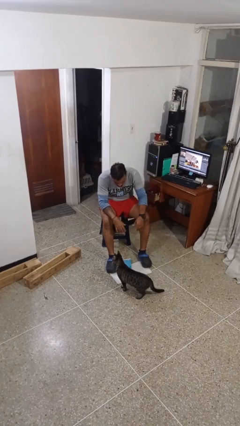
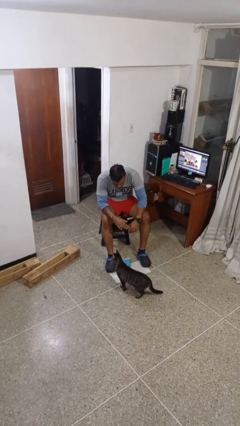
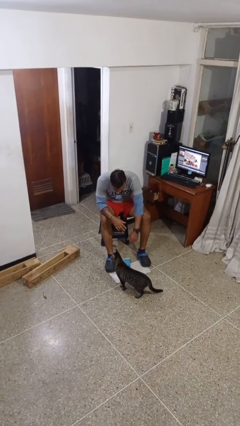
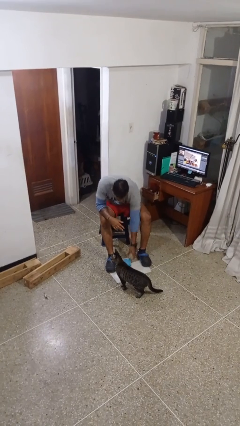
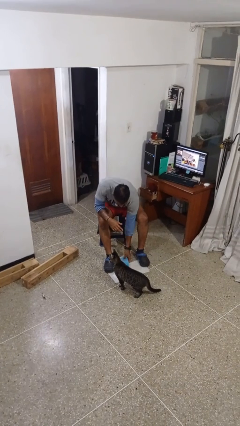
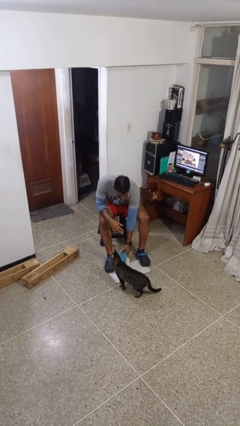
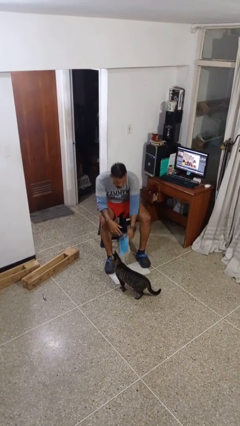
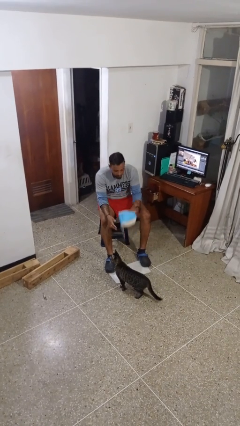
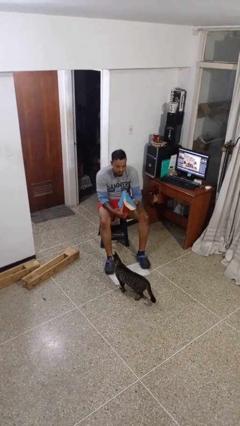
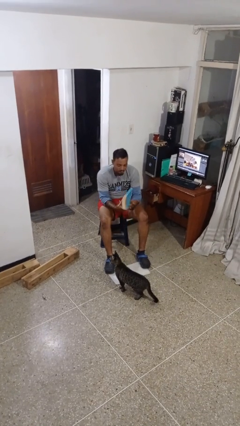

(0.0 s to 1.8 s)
person picks up object from floor

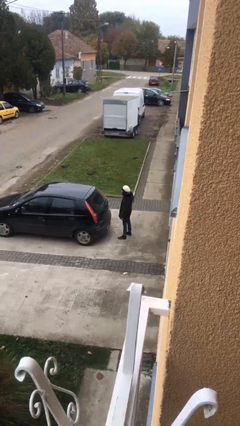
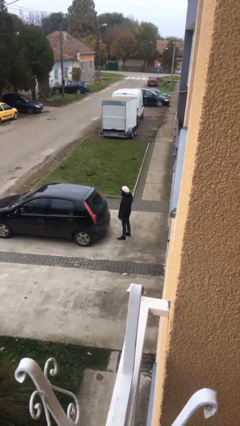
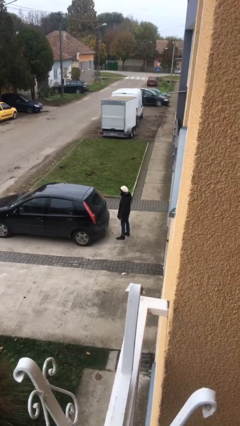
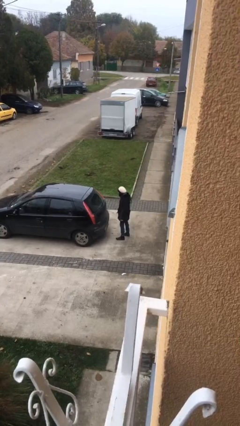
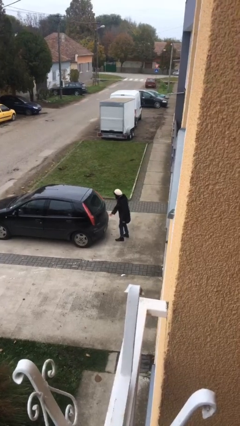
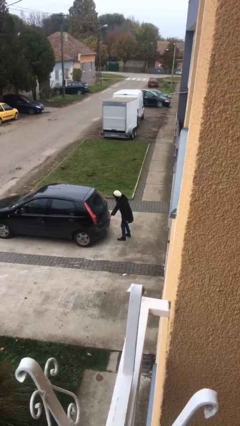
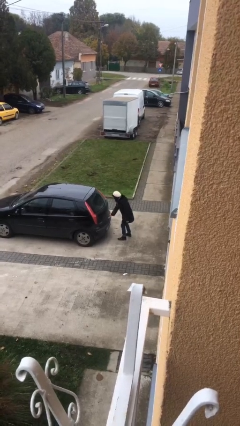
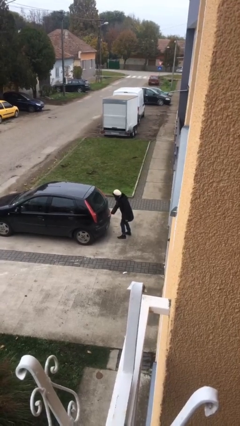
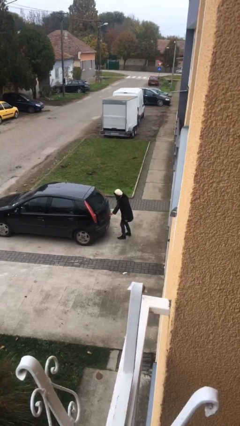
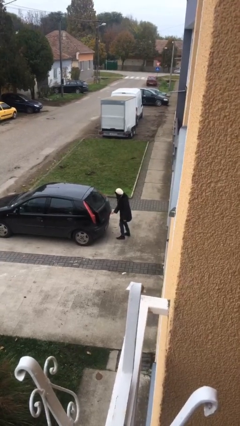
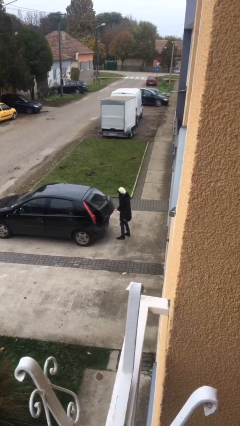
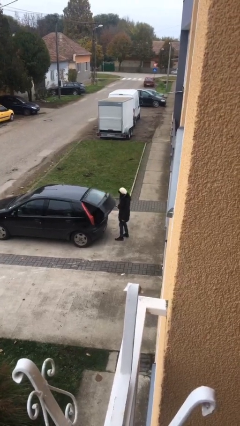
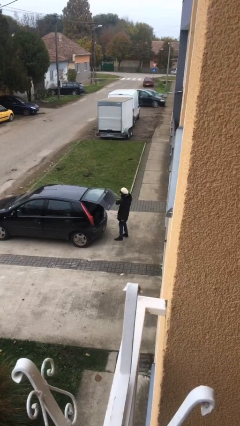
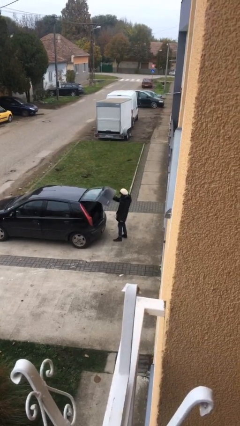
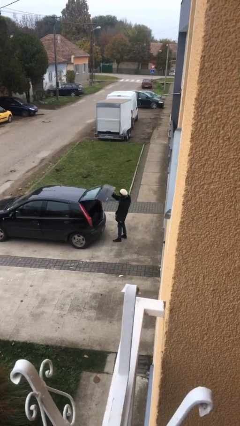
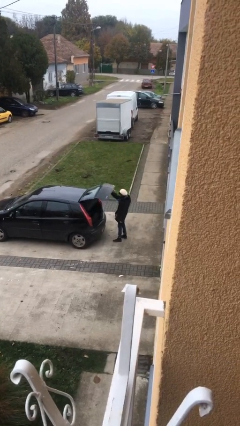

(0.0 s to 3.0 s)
person opens car trunk

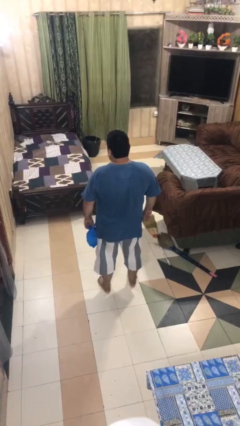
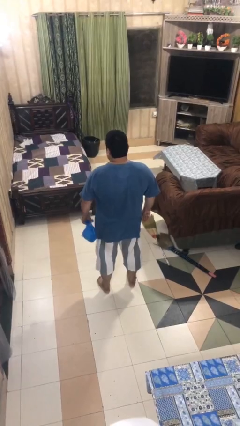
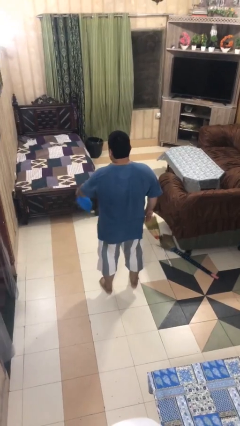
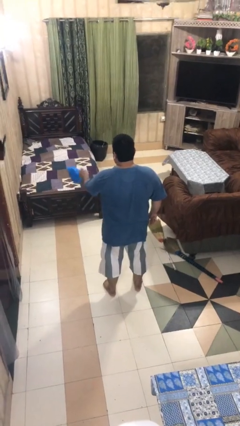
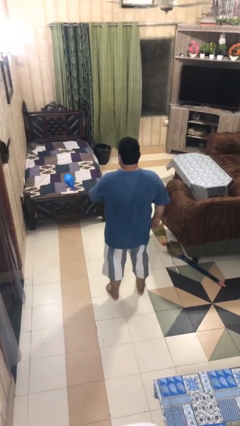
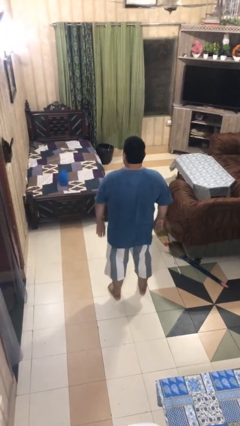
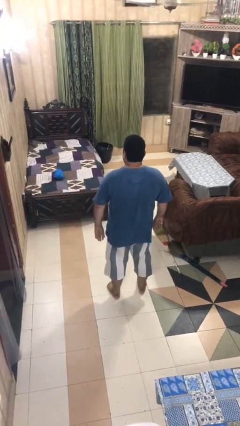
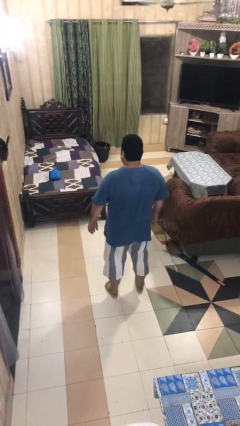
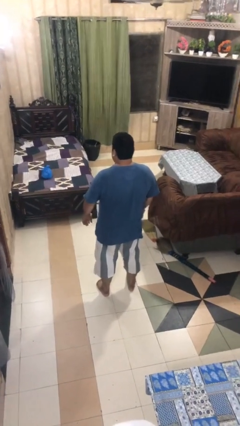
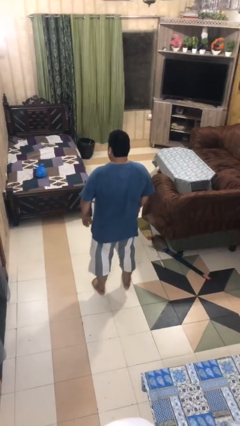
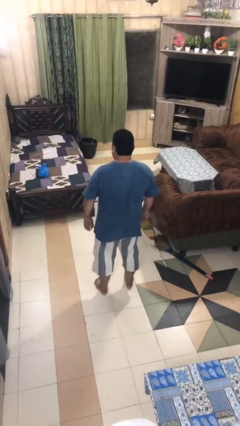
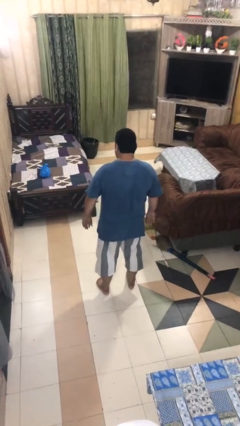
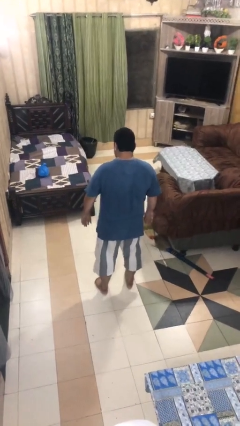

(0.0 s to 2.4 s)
person throws object on bed

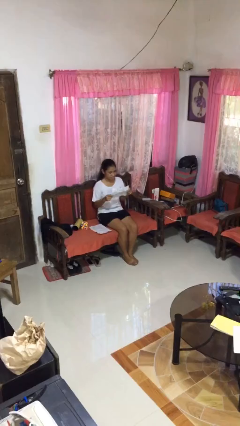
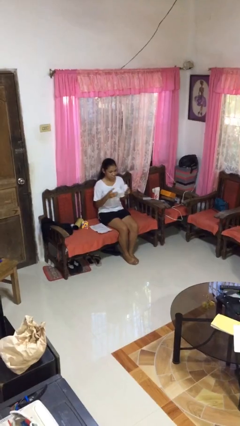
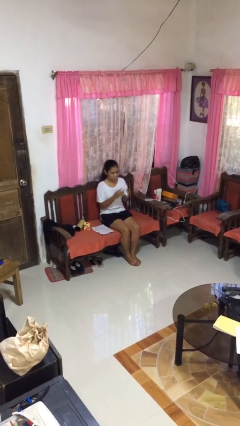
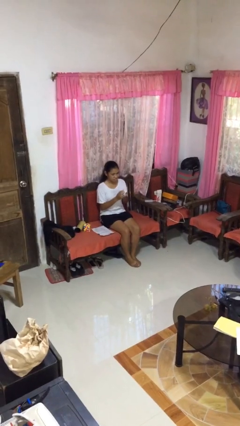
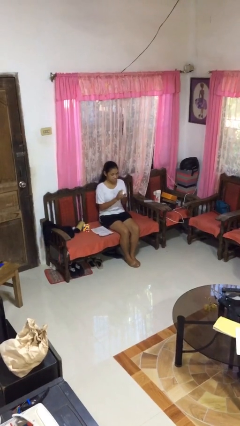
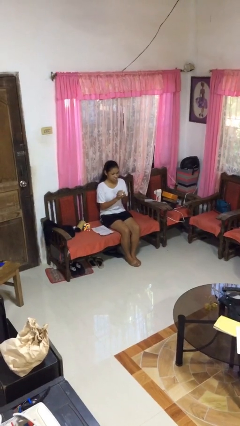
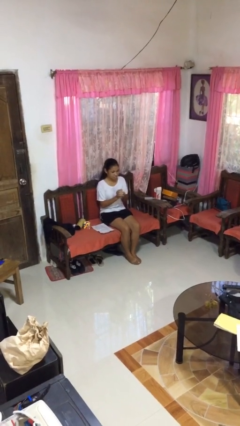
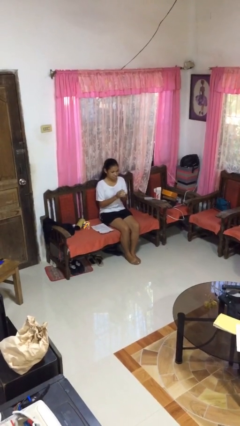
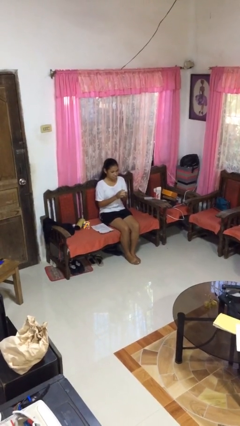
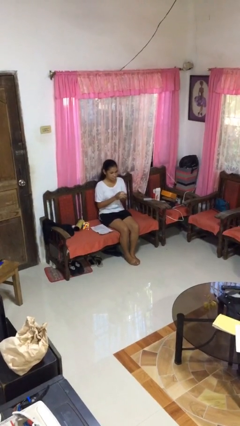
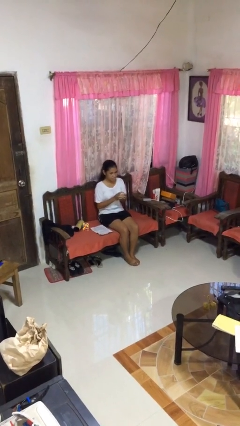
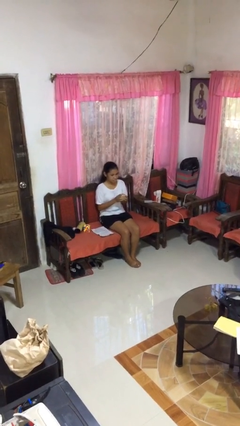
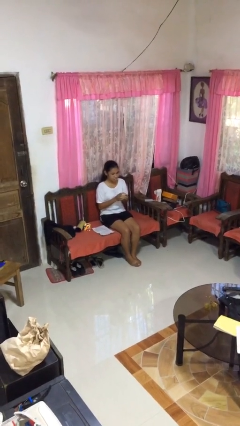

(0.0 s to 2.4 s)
person crumples paper

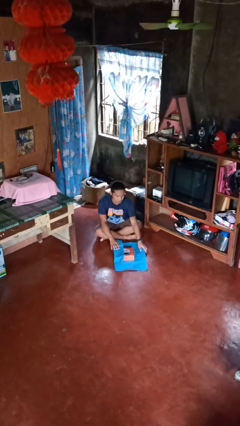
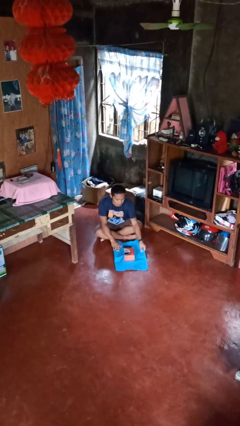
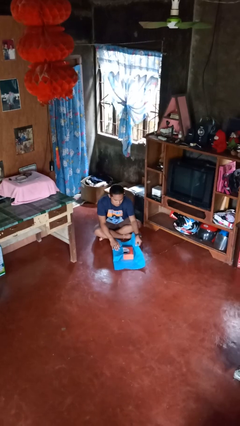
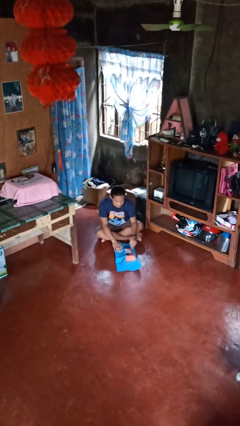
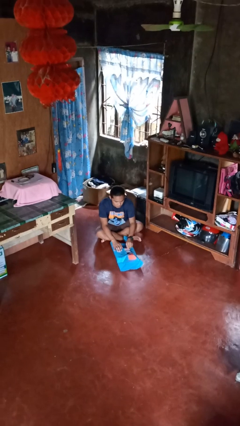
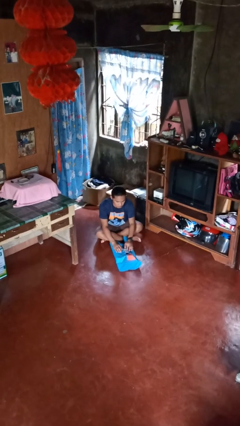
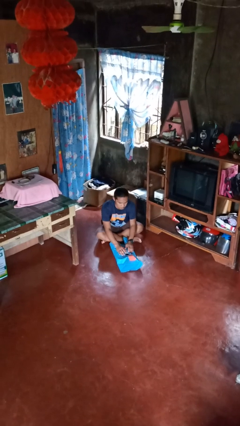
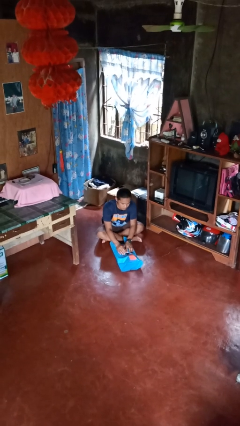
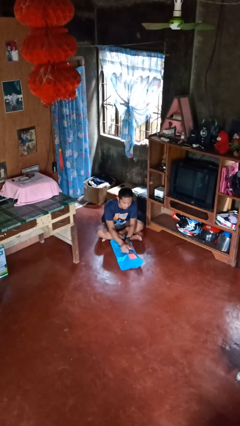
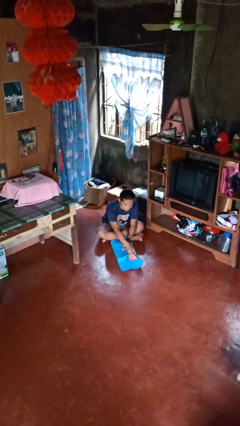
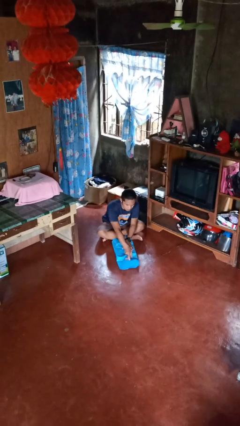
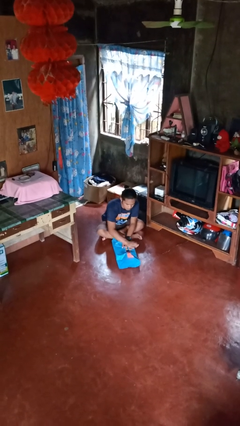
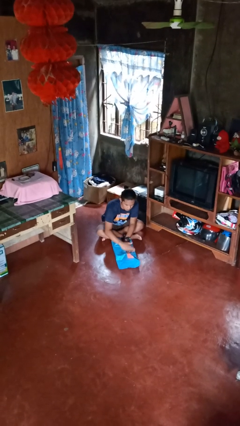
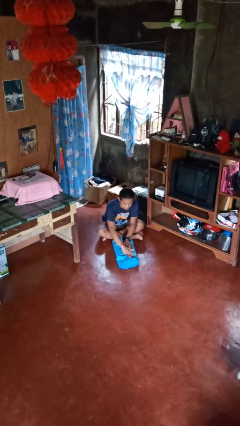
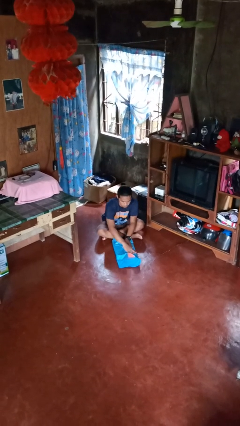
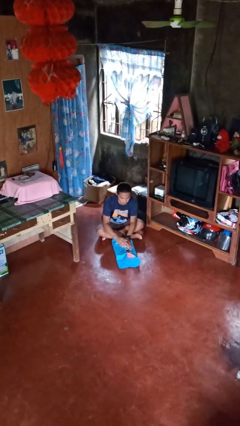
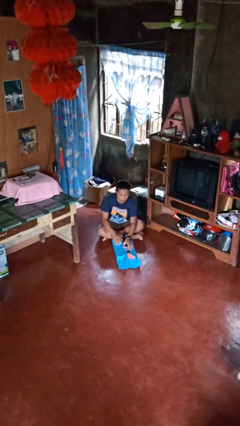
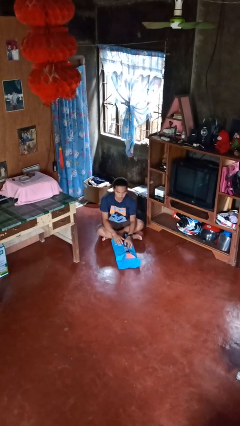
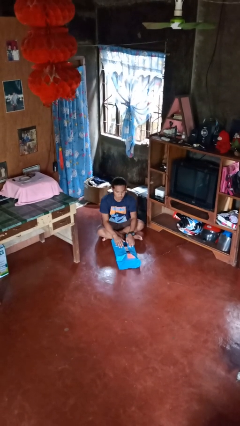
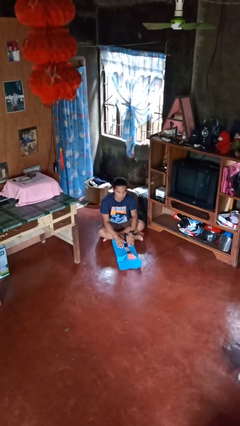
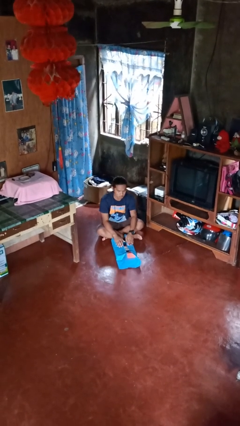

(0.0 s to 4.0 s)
person wraps box

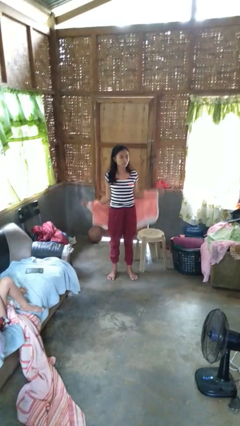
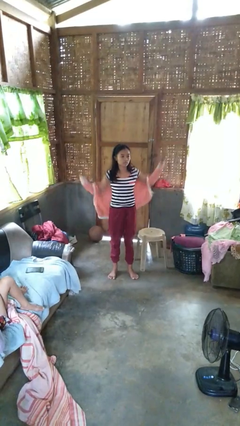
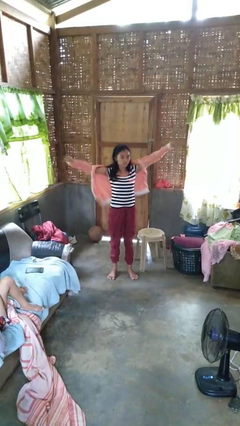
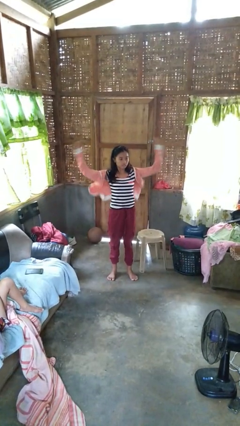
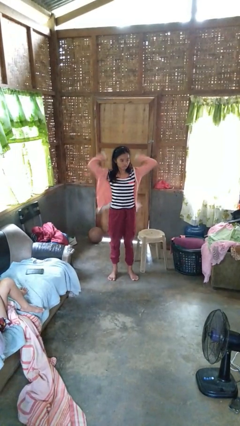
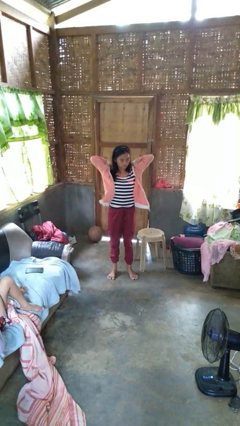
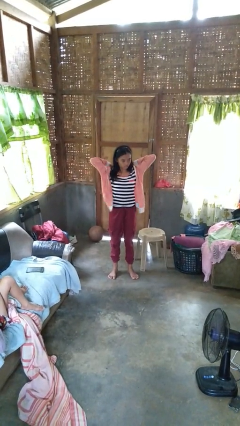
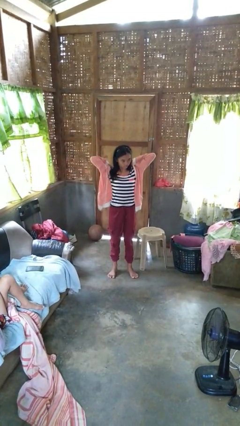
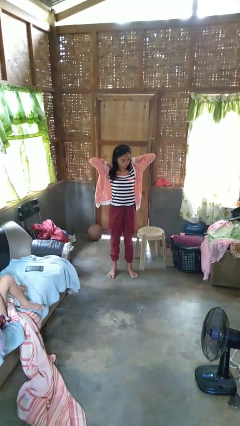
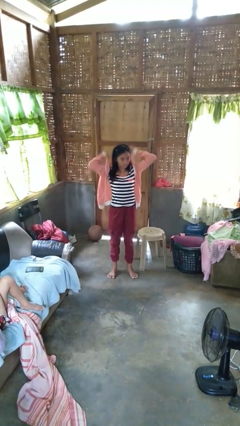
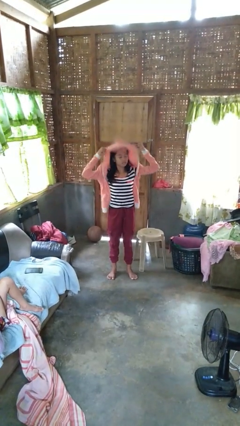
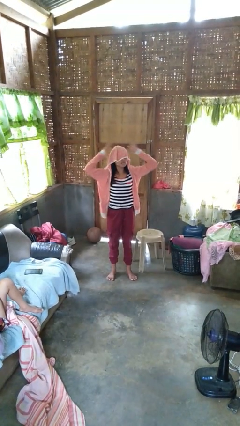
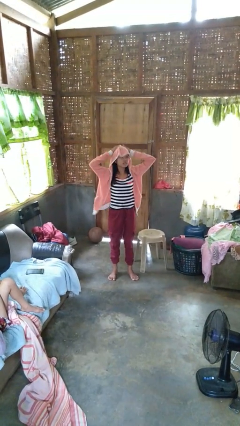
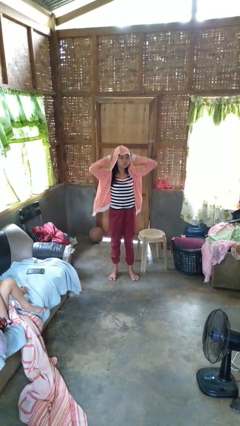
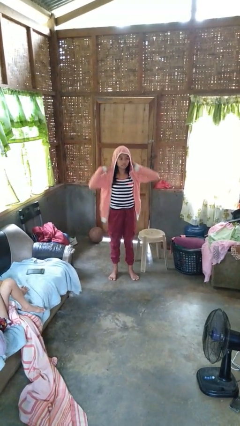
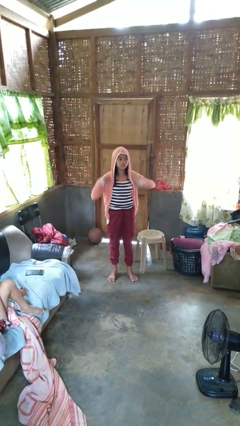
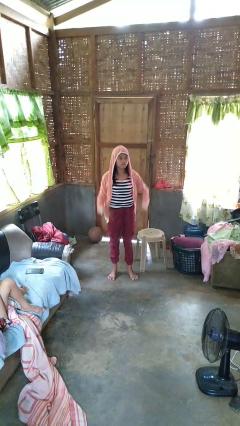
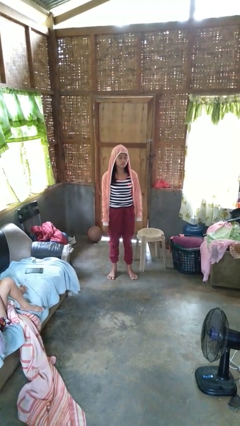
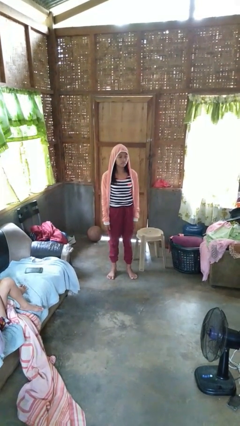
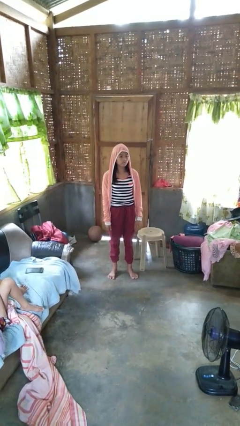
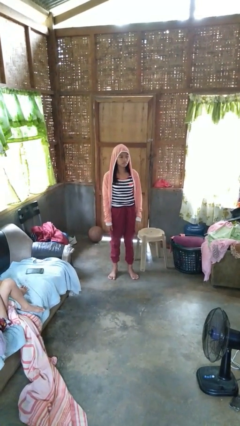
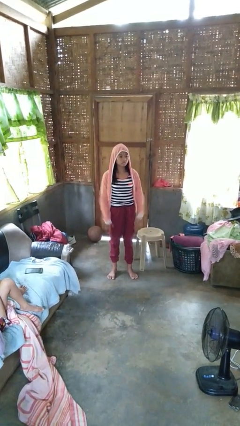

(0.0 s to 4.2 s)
person puts on hoodie
